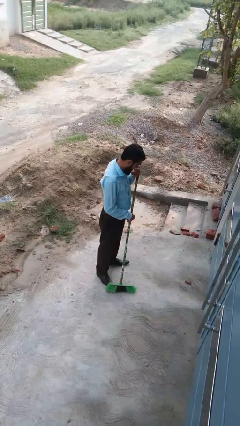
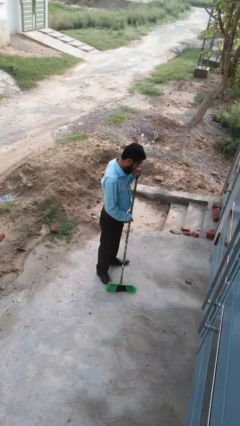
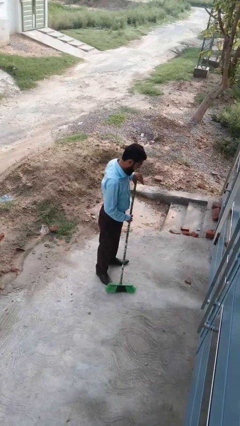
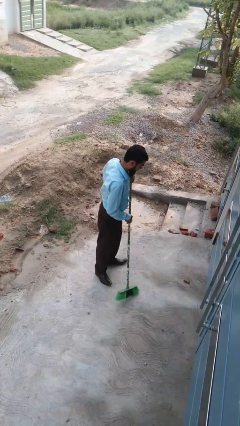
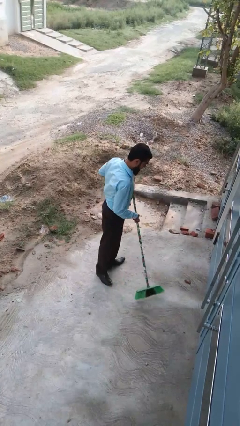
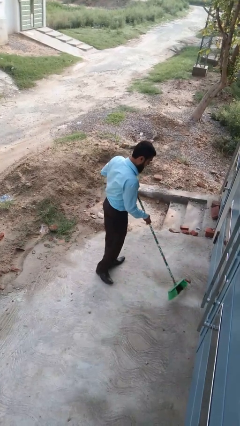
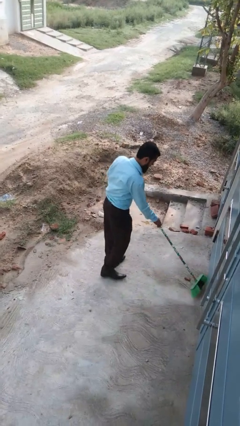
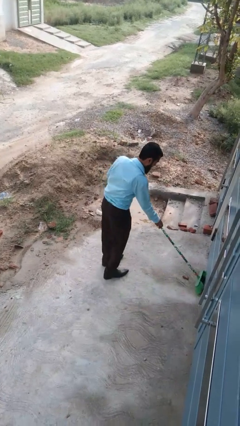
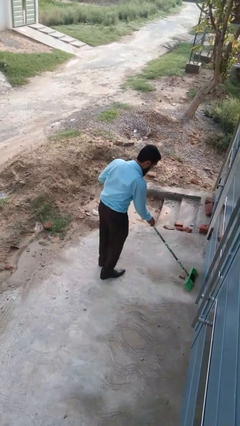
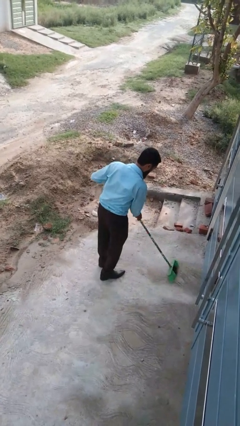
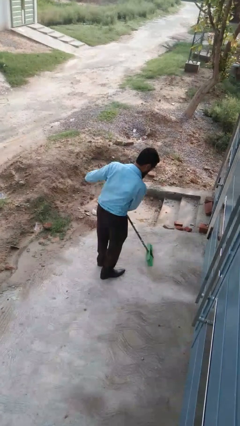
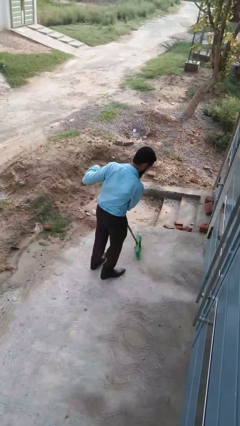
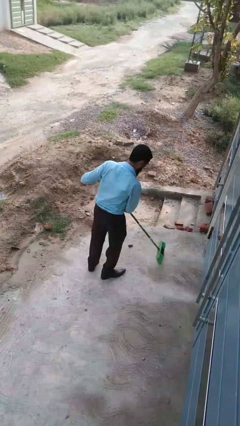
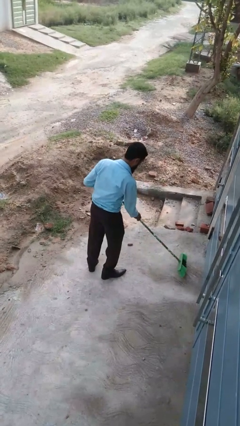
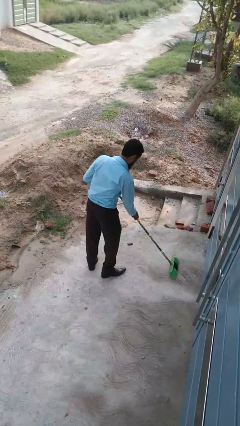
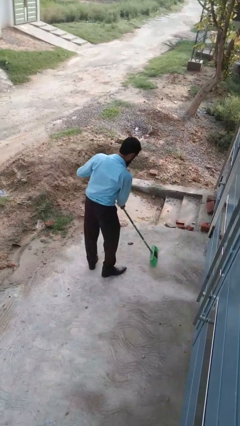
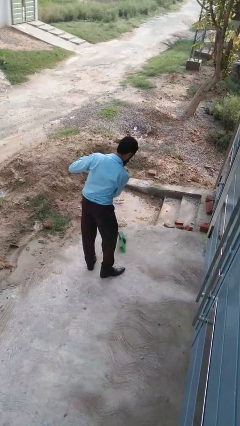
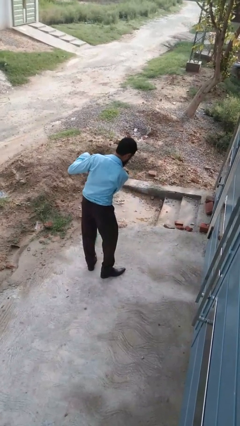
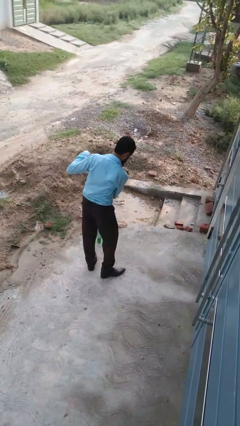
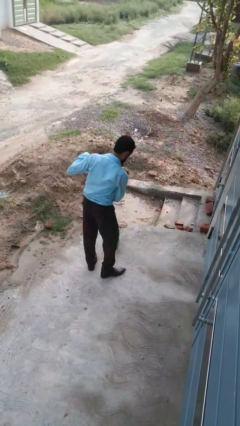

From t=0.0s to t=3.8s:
person sweeps floor

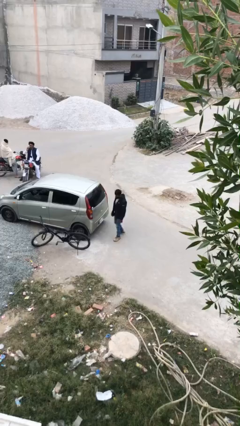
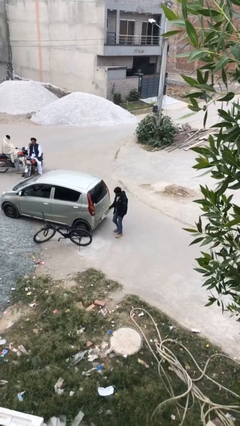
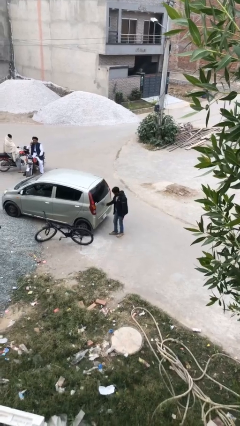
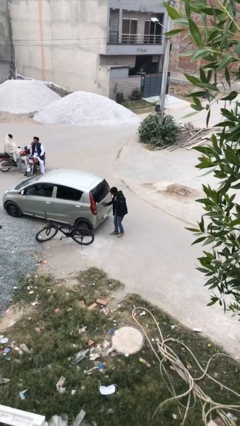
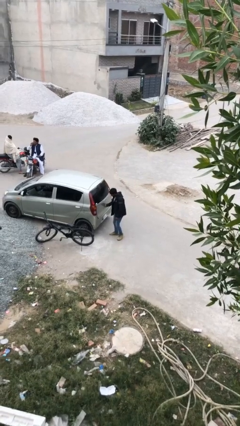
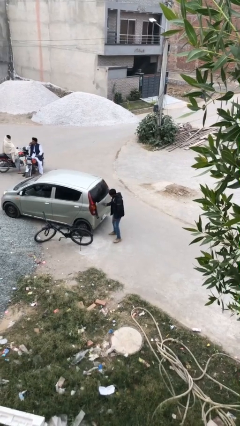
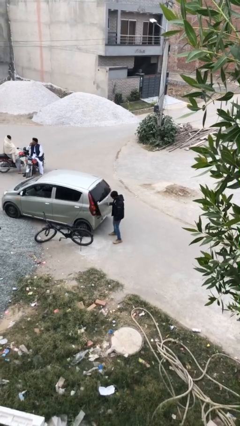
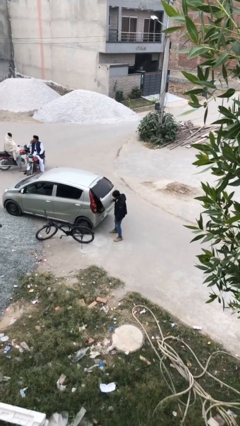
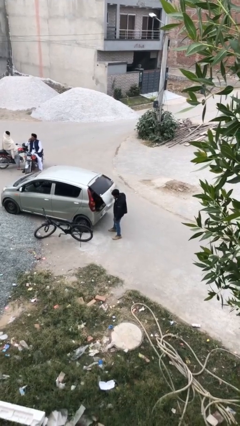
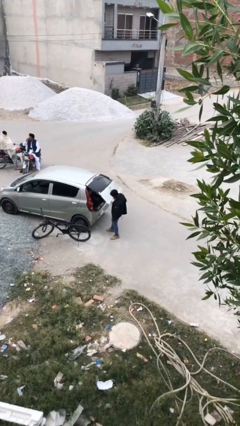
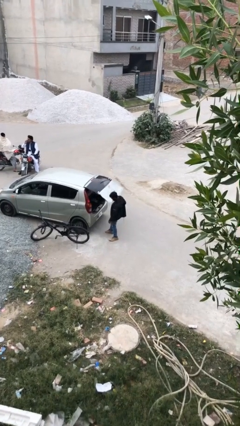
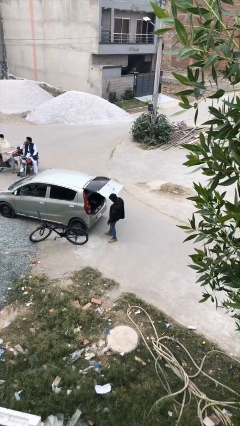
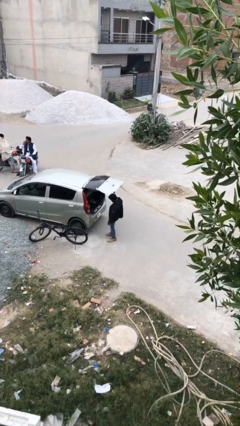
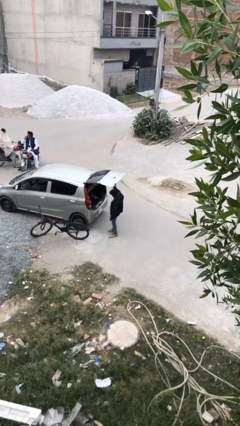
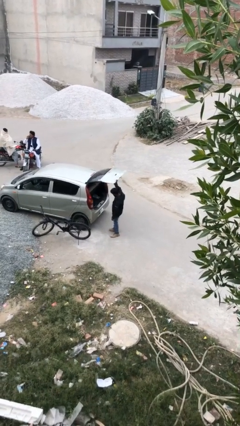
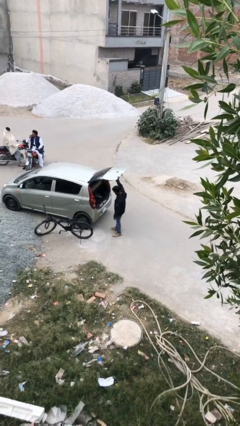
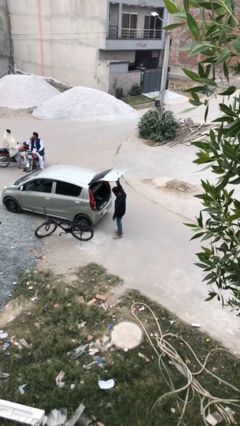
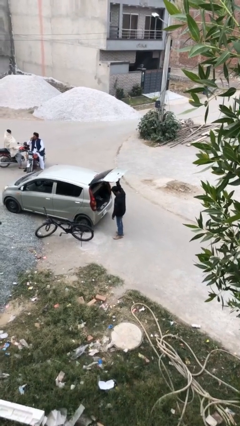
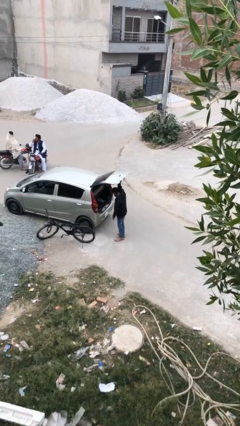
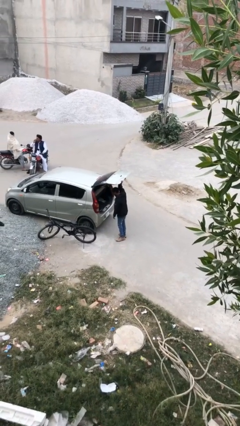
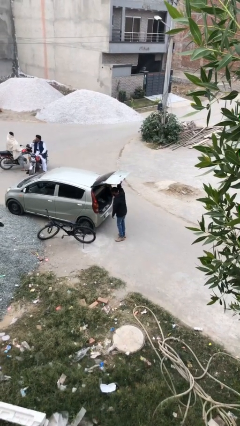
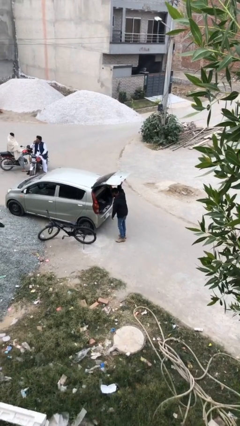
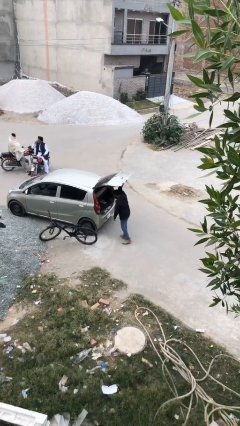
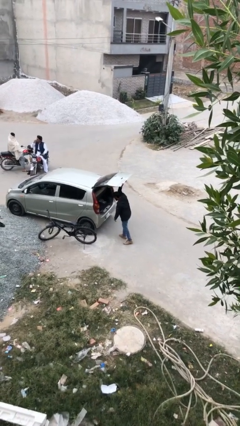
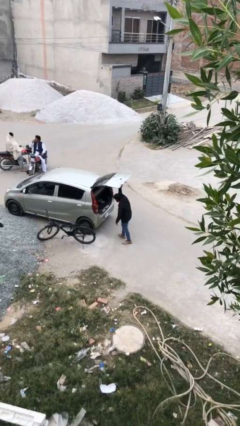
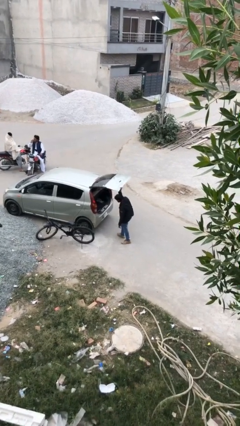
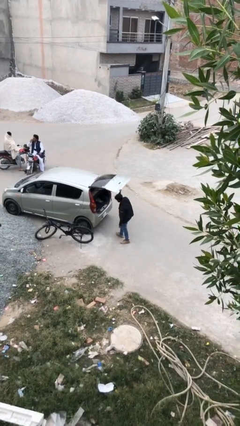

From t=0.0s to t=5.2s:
person opens car trunk

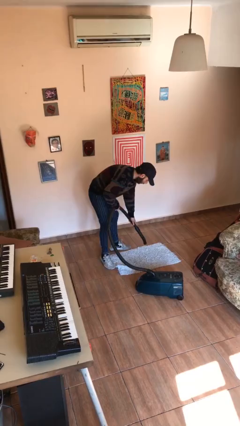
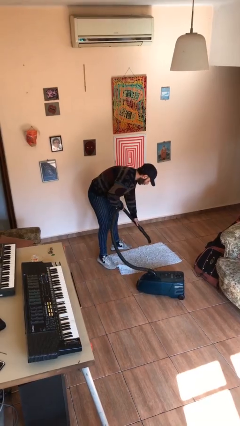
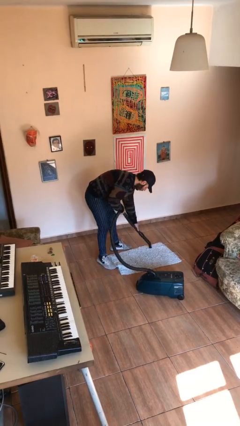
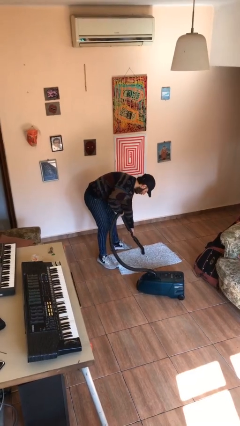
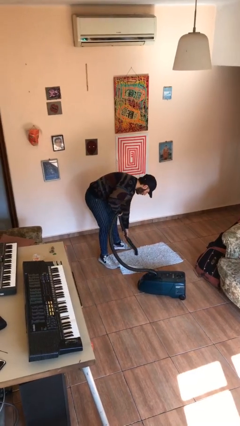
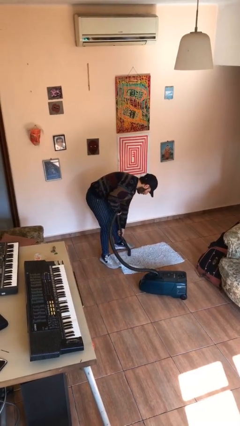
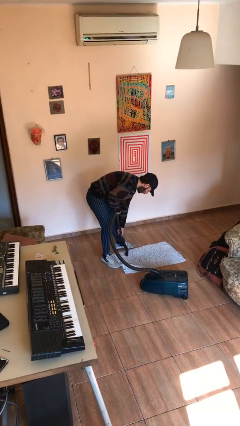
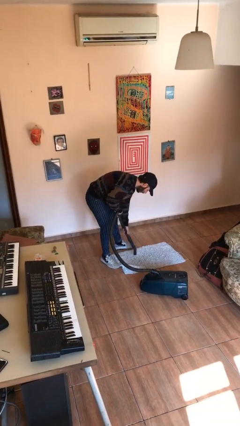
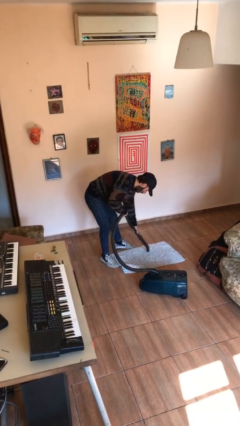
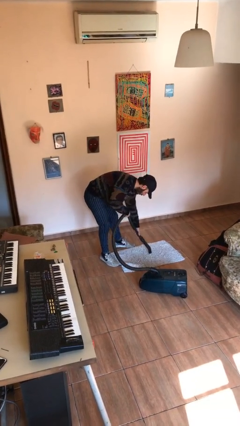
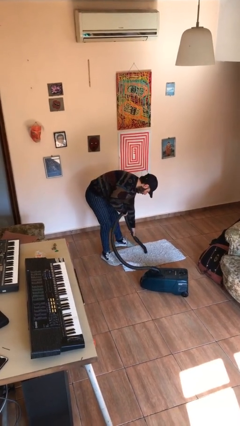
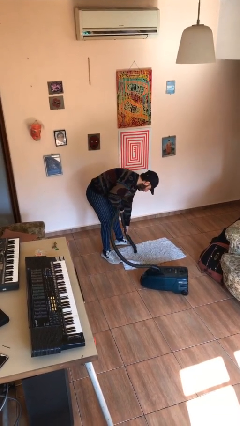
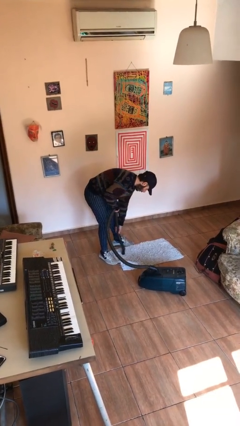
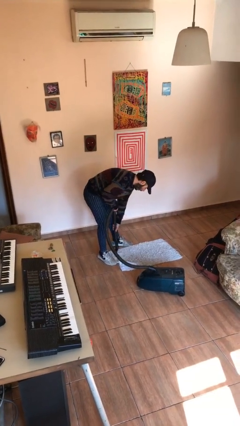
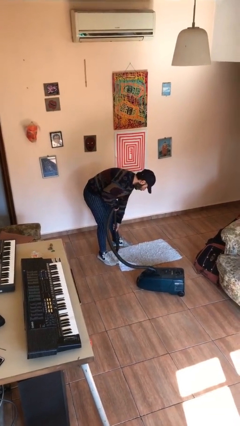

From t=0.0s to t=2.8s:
person vacuums carpet

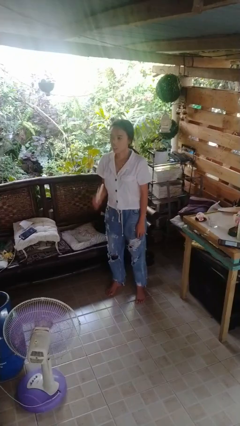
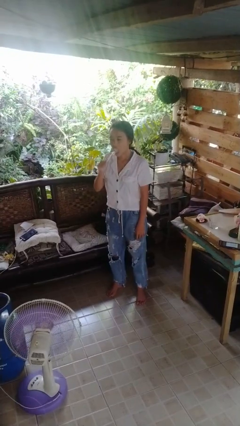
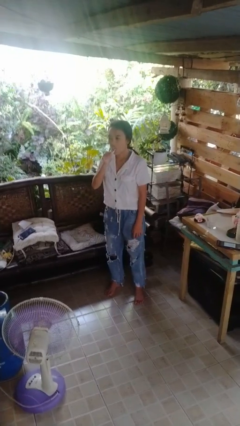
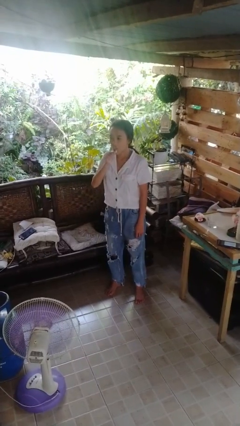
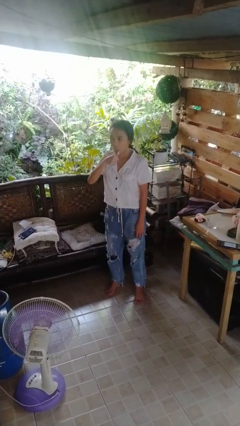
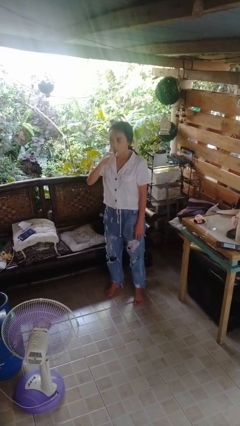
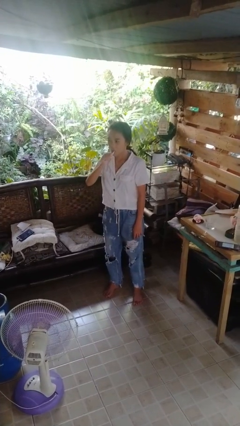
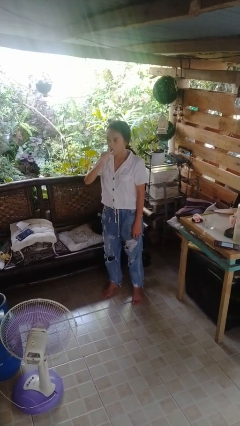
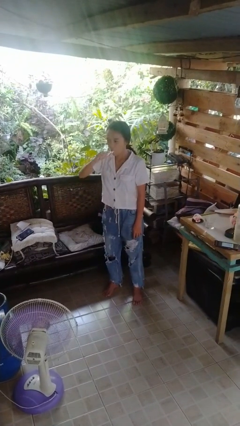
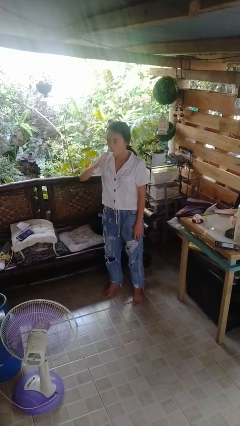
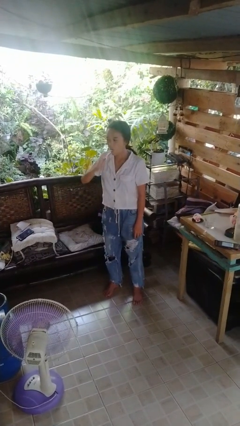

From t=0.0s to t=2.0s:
person brushes teeth

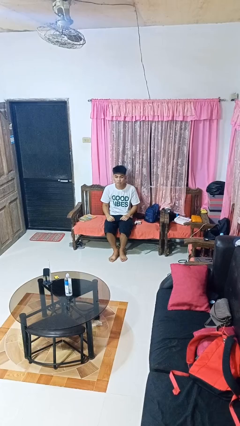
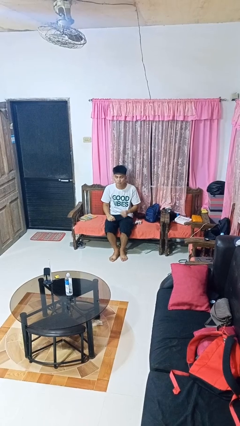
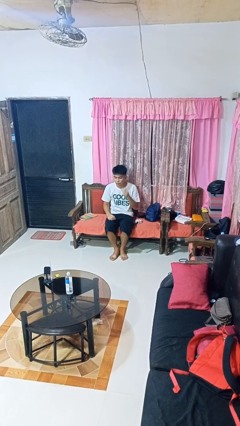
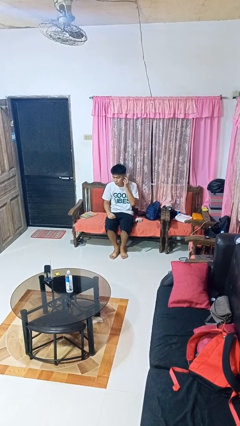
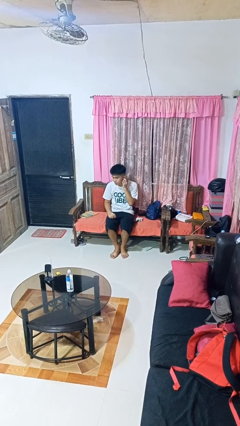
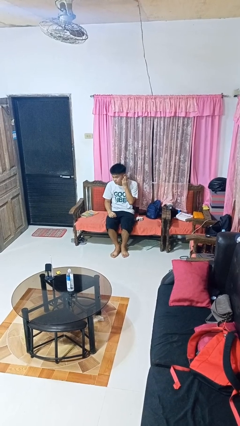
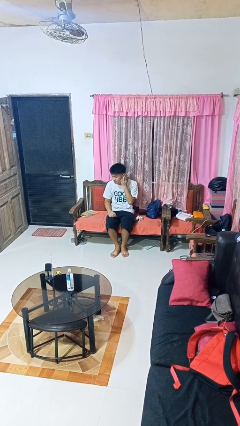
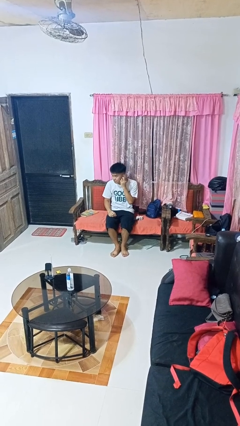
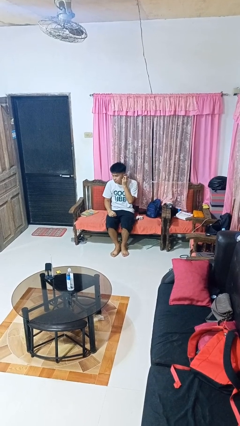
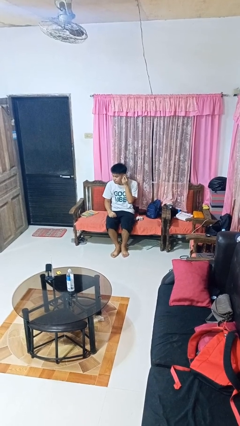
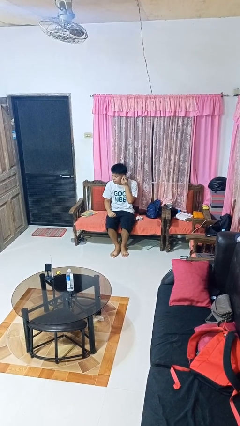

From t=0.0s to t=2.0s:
person touches earlobe

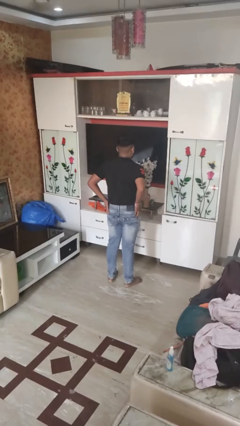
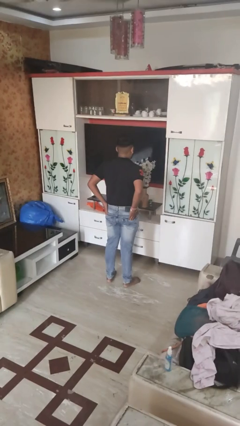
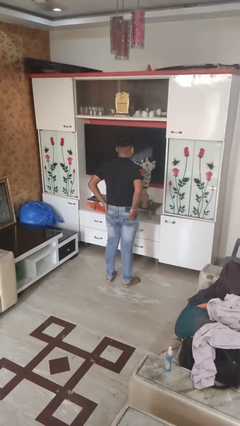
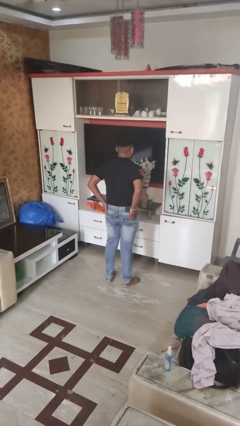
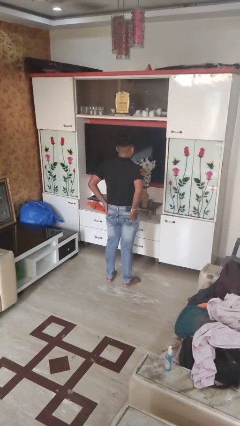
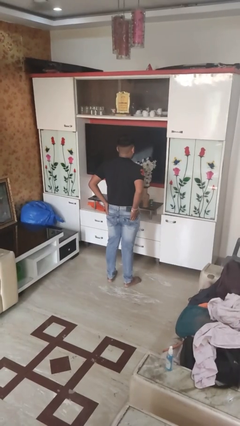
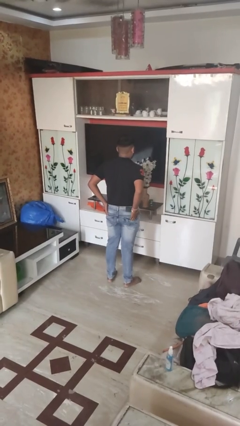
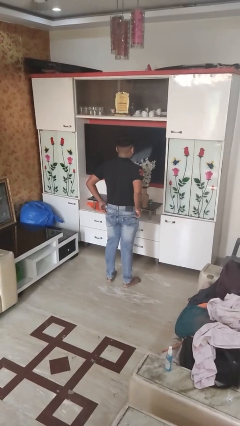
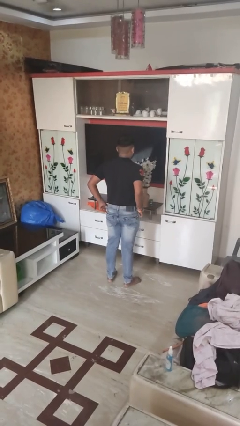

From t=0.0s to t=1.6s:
person puts hands in back pockets
